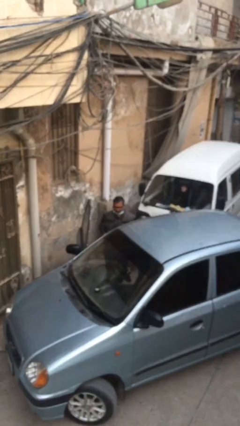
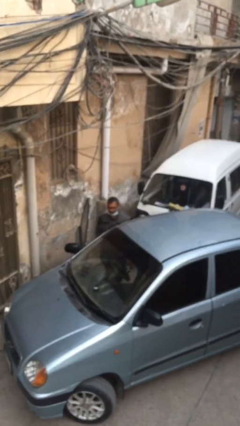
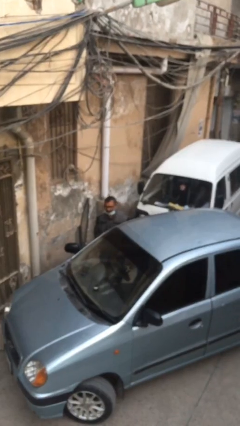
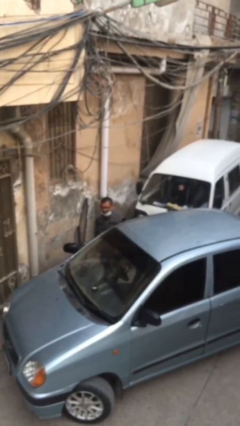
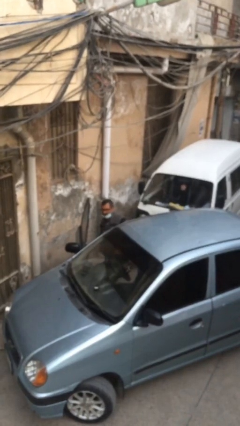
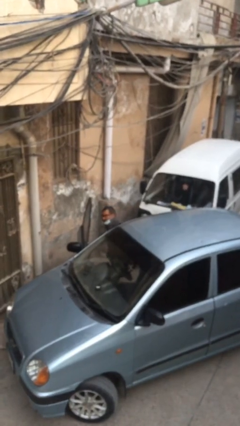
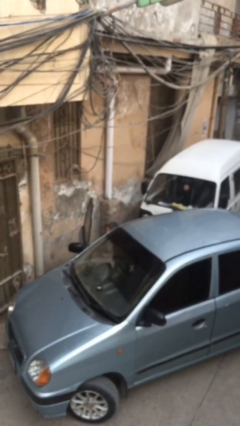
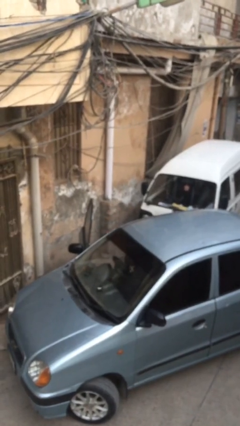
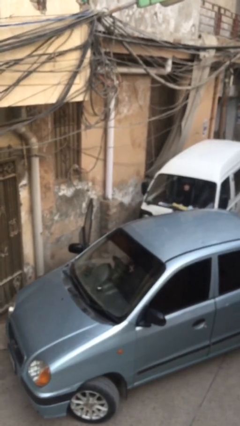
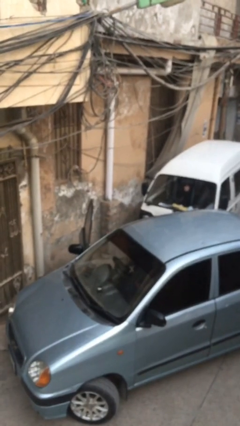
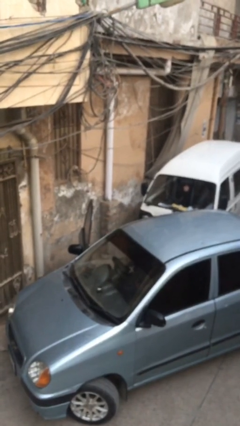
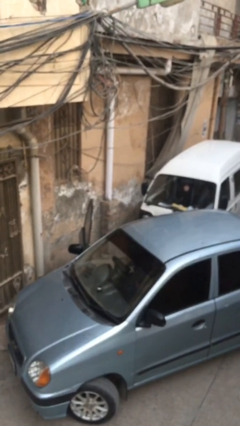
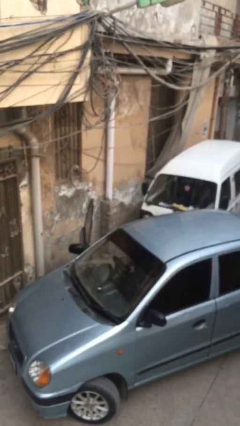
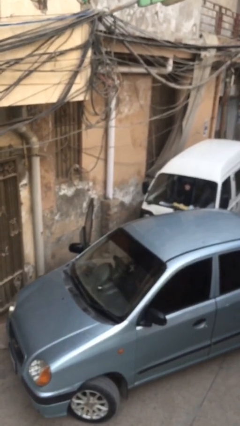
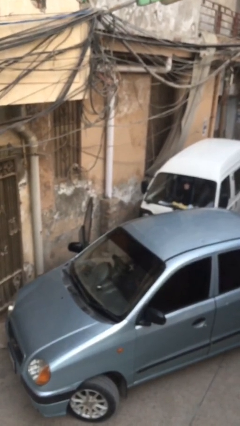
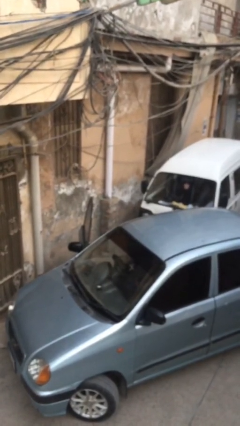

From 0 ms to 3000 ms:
person enters car

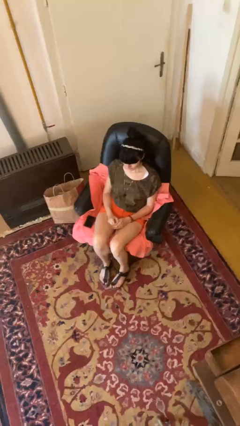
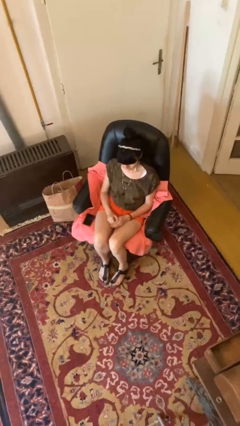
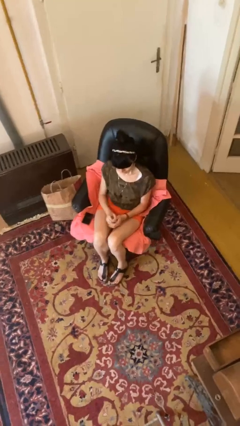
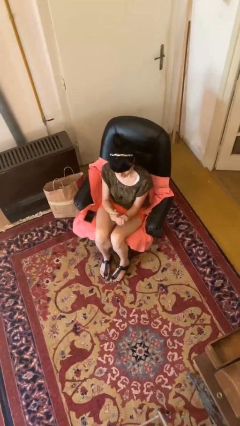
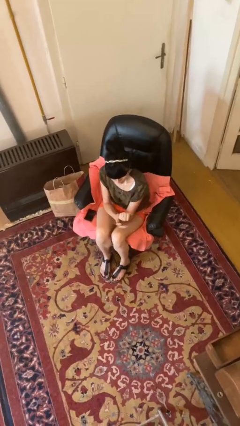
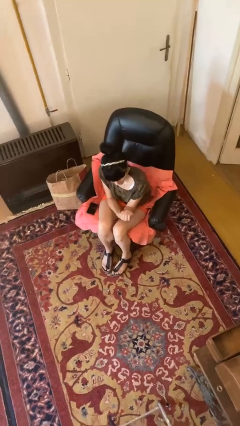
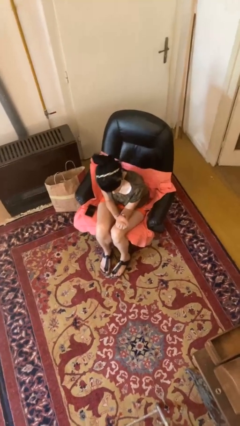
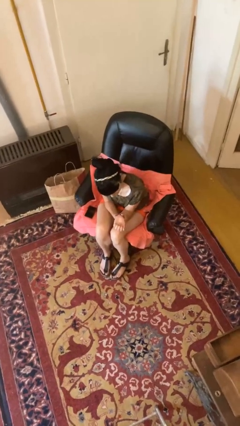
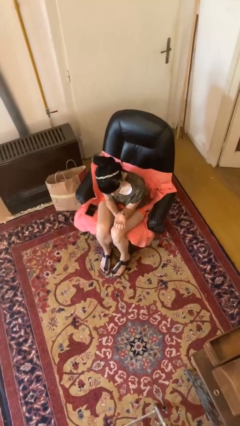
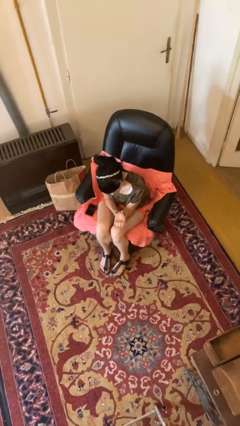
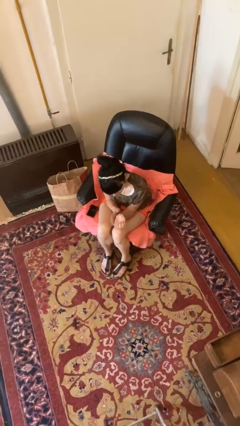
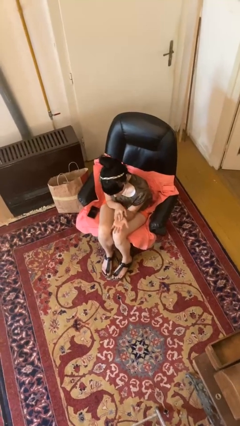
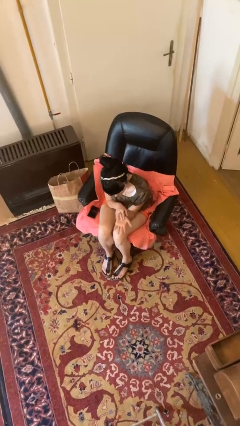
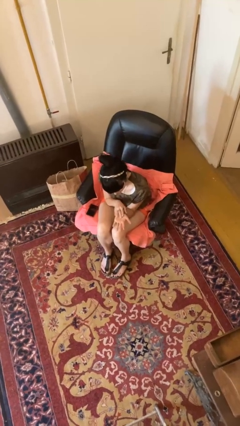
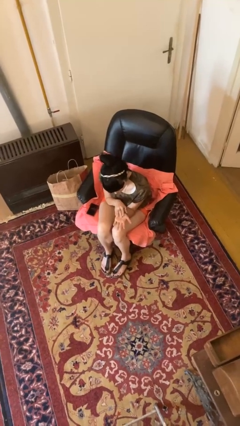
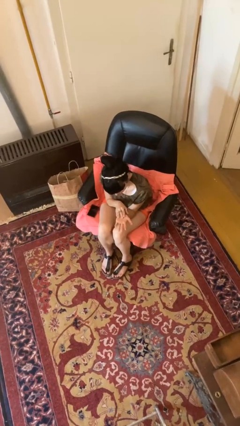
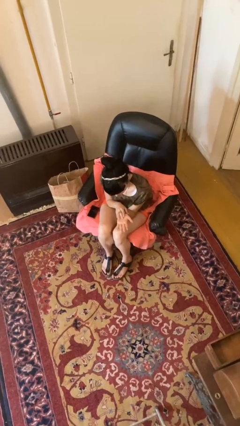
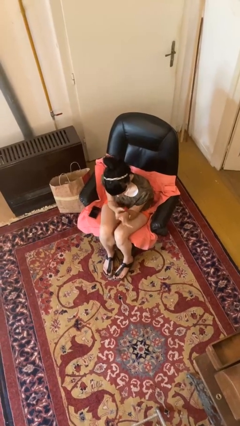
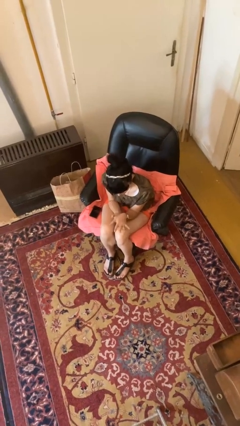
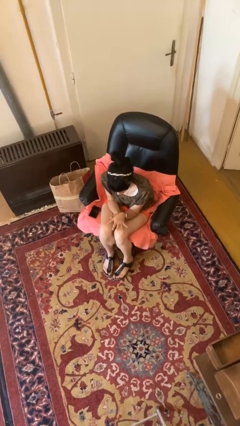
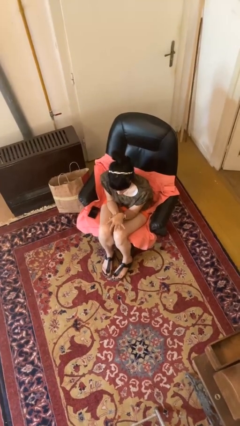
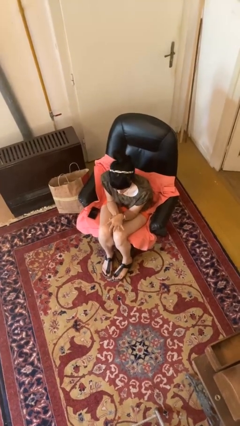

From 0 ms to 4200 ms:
person looks at hands in lap

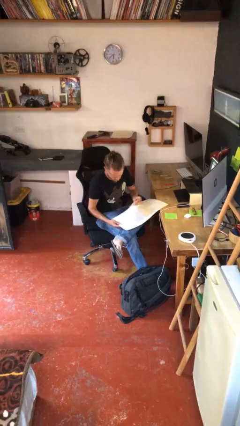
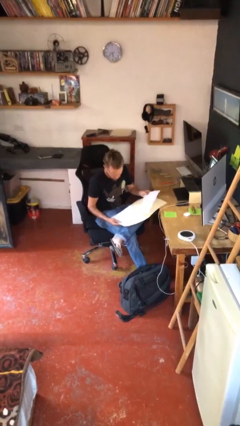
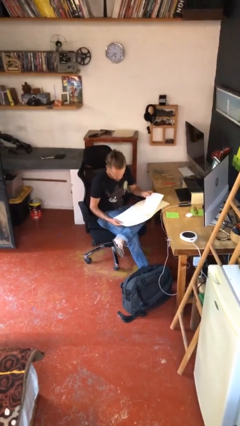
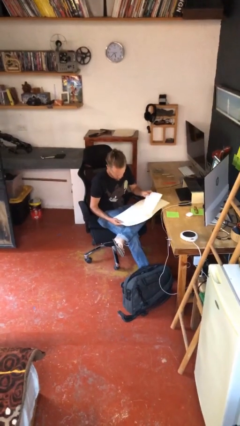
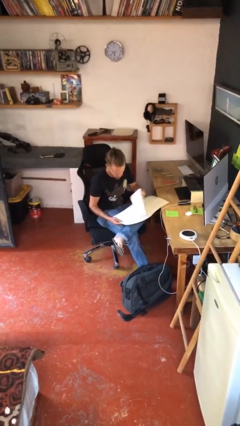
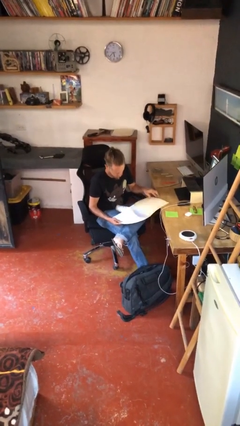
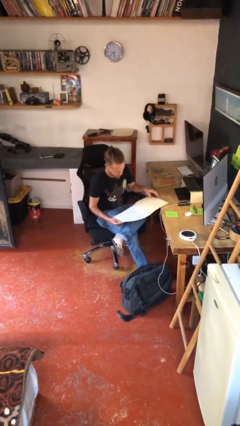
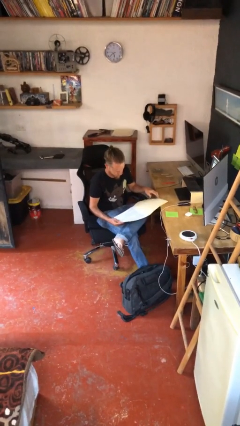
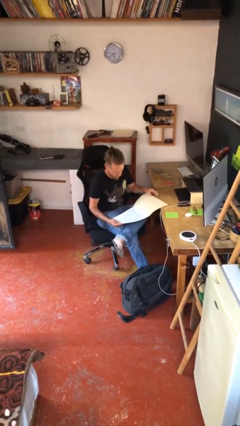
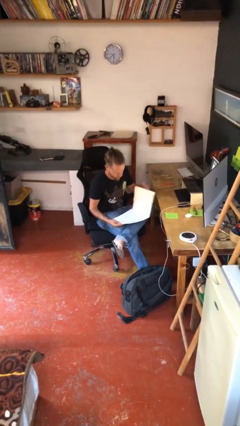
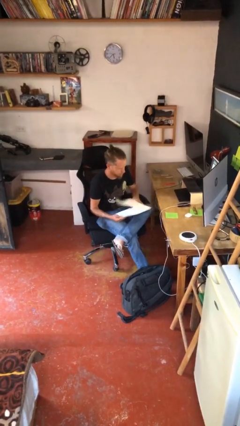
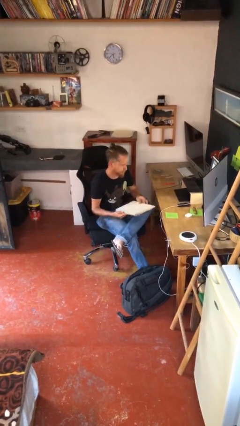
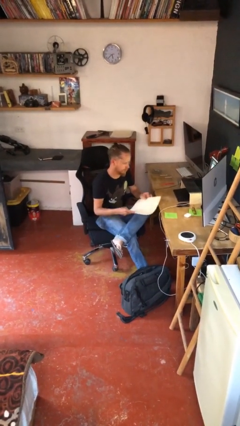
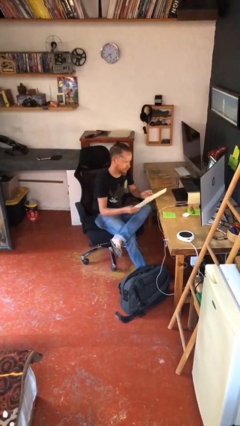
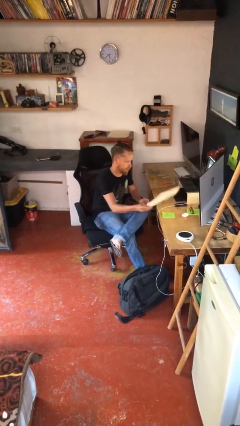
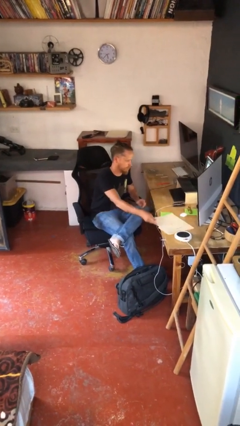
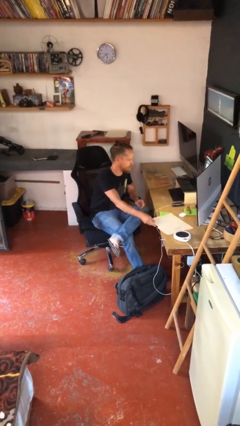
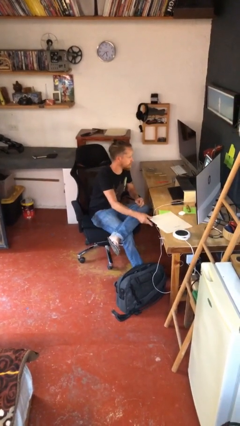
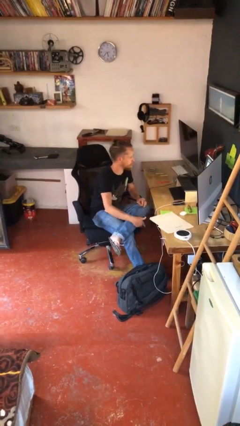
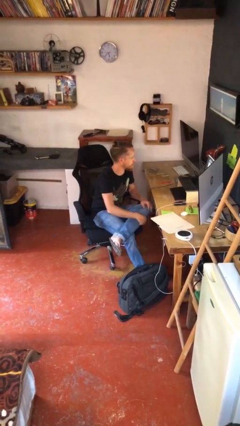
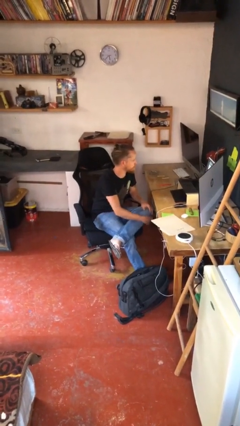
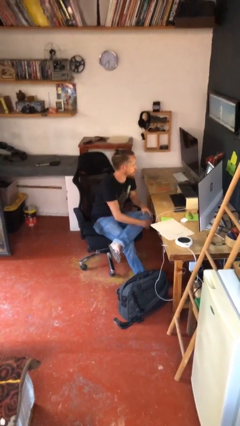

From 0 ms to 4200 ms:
person puts down object on table

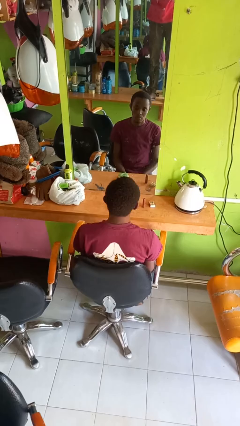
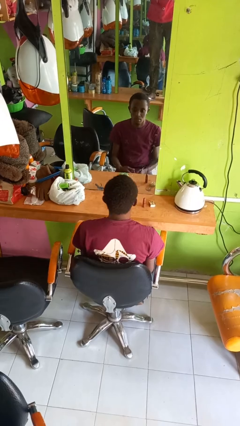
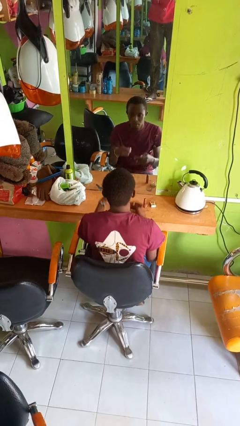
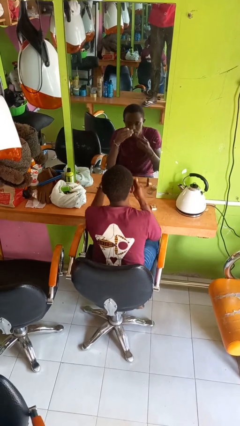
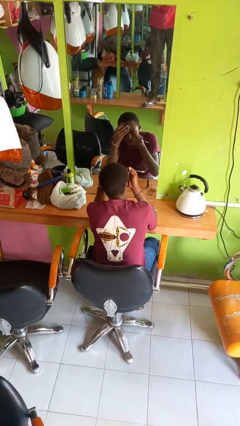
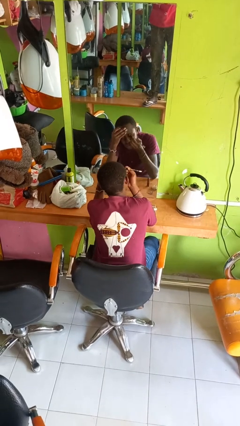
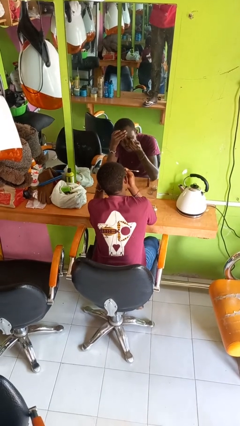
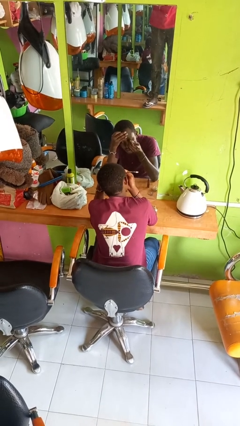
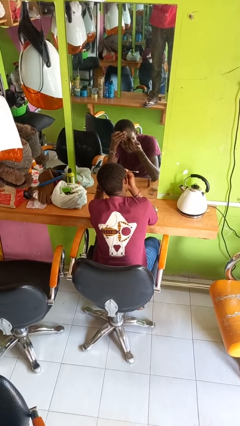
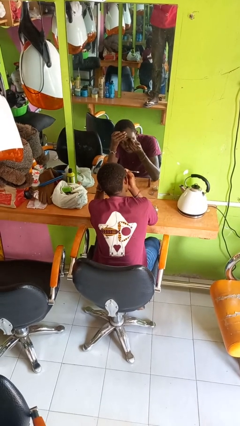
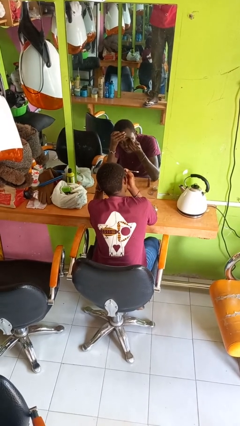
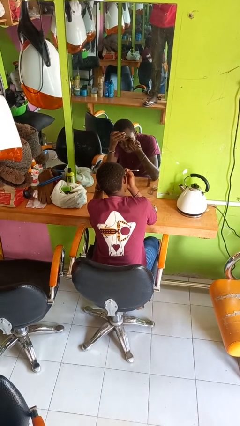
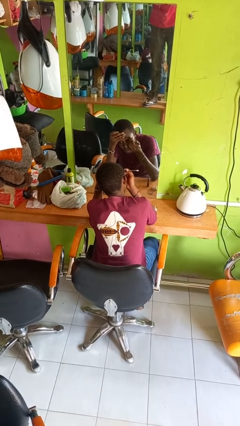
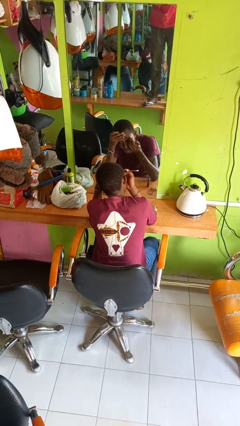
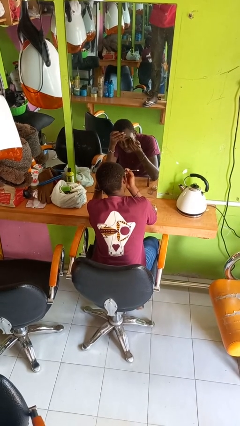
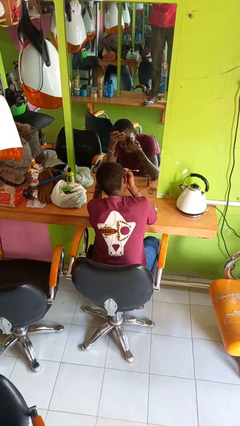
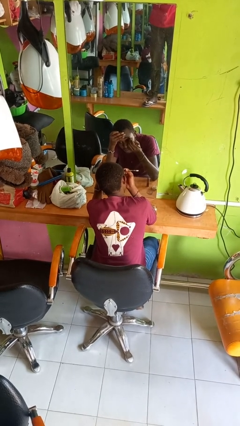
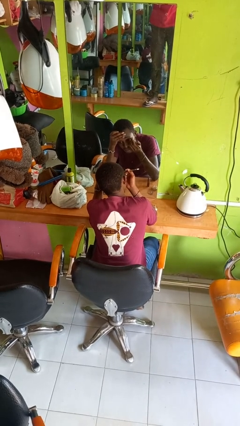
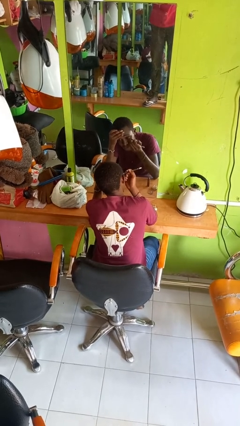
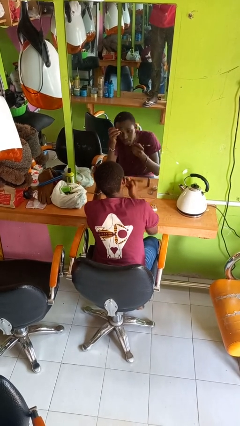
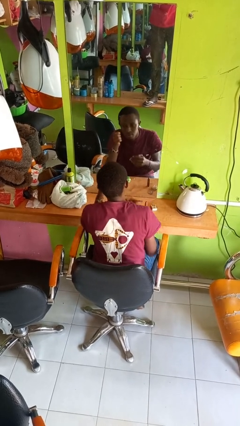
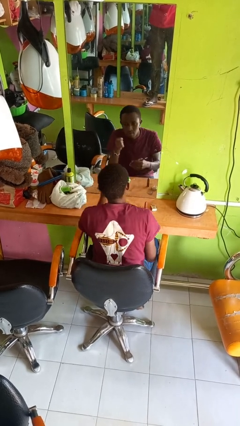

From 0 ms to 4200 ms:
person applies eye makeup

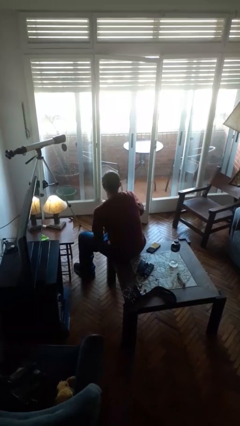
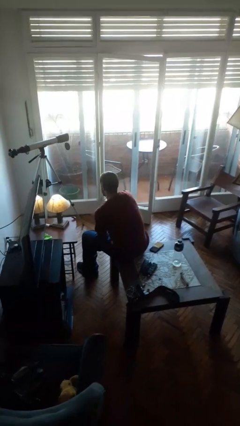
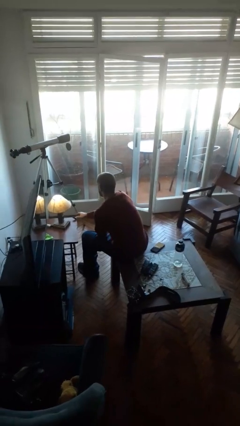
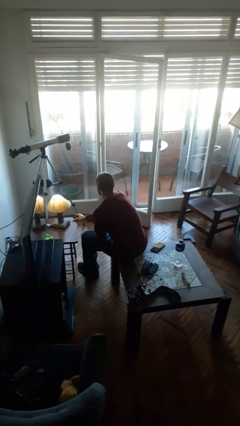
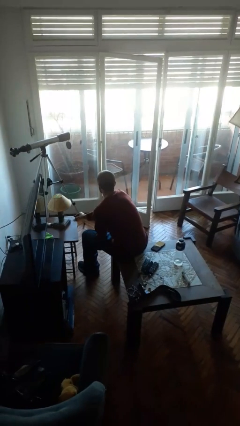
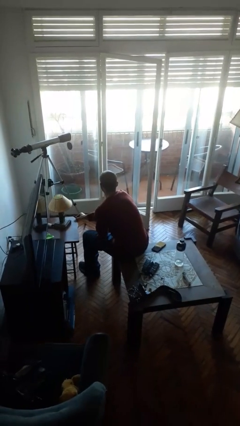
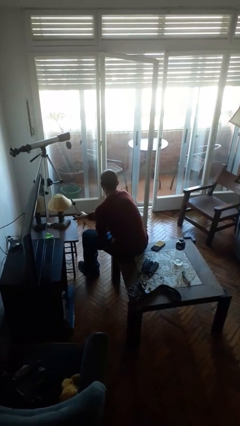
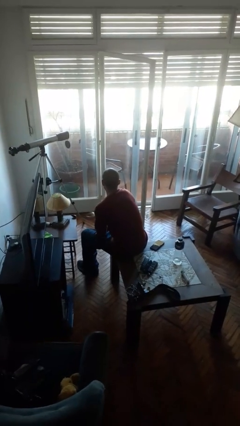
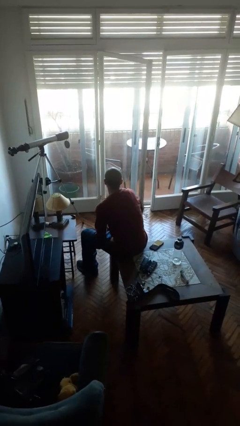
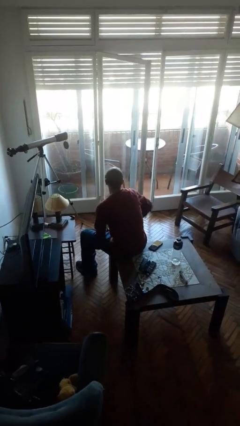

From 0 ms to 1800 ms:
person turns off lamp
